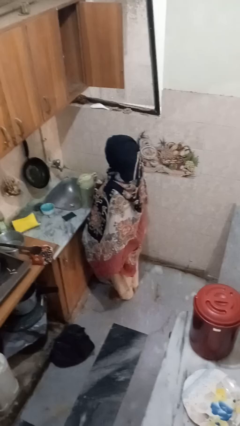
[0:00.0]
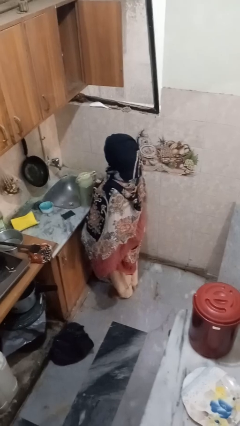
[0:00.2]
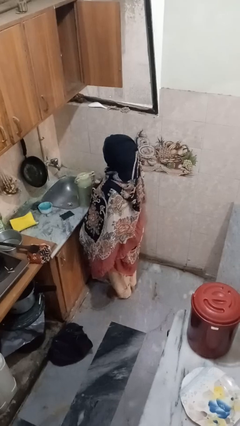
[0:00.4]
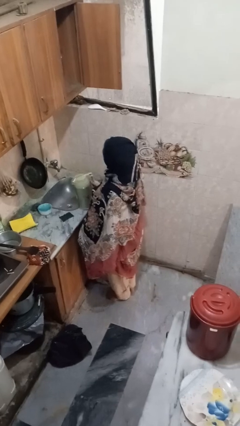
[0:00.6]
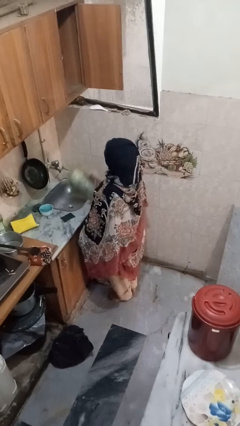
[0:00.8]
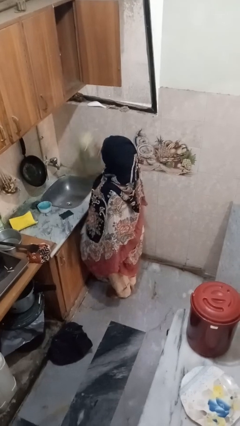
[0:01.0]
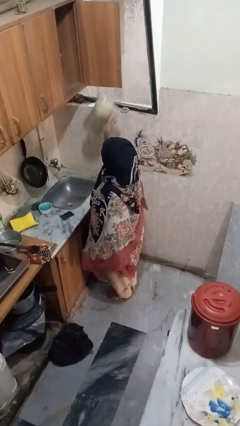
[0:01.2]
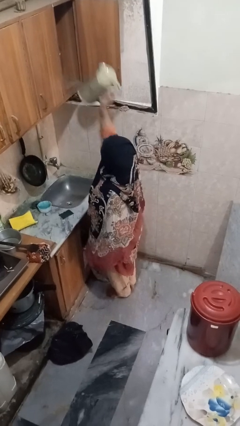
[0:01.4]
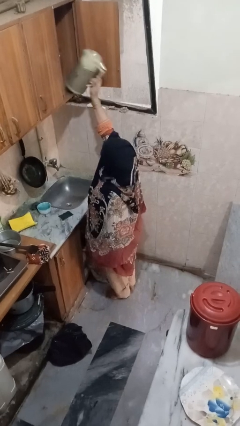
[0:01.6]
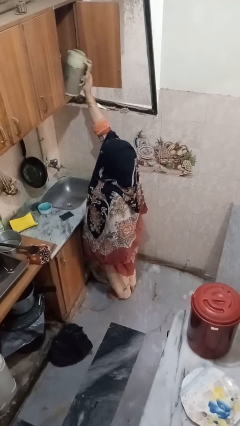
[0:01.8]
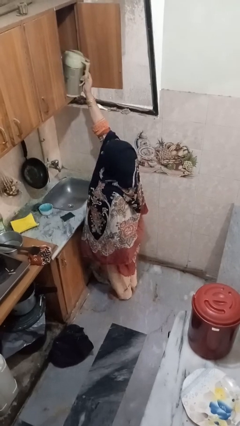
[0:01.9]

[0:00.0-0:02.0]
person takes object from cabinet

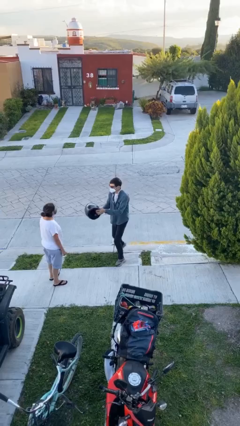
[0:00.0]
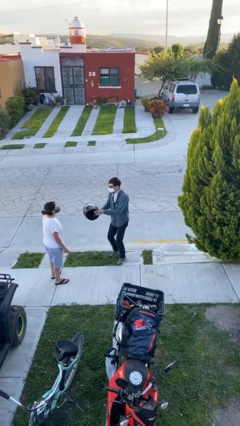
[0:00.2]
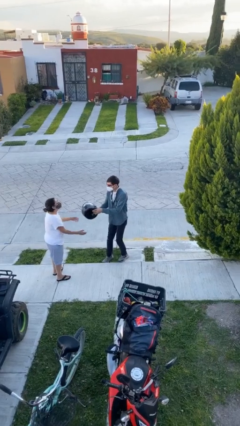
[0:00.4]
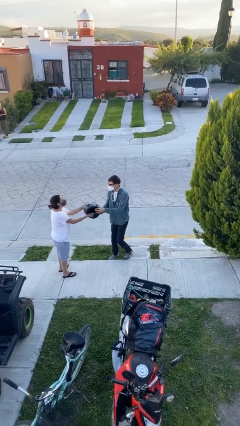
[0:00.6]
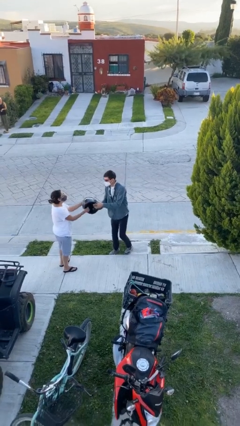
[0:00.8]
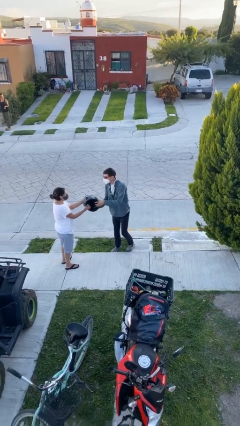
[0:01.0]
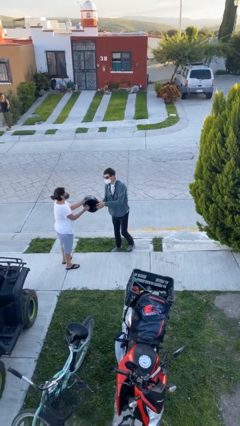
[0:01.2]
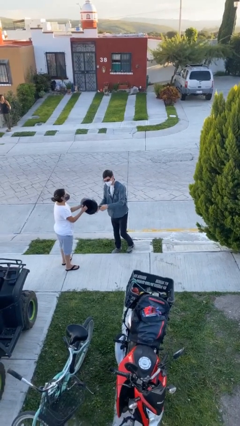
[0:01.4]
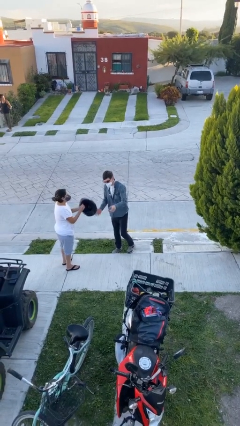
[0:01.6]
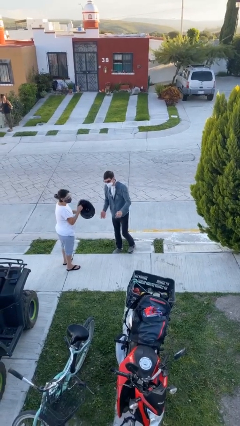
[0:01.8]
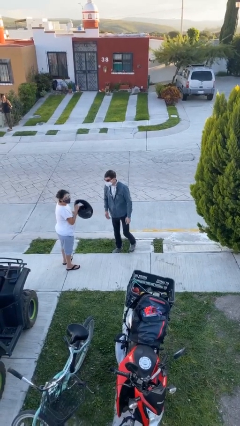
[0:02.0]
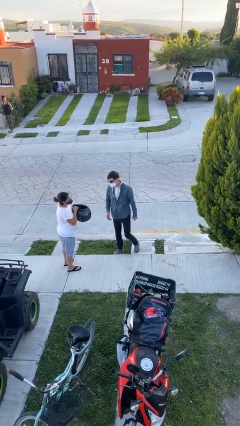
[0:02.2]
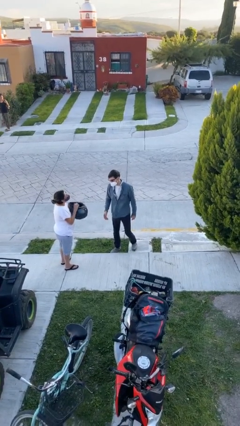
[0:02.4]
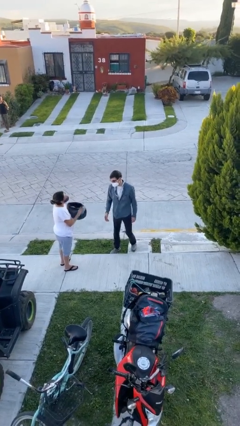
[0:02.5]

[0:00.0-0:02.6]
person transfers object to person

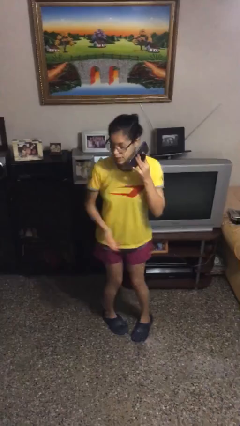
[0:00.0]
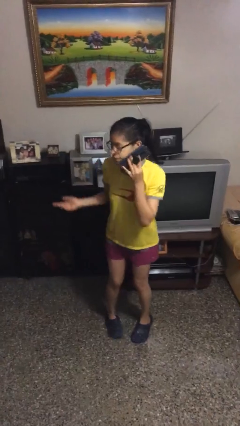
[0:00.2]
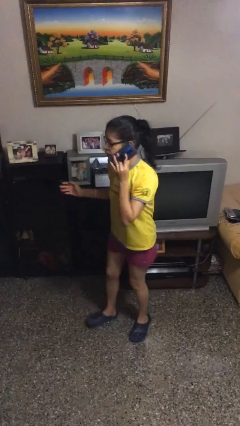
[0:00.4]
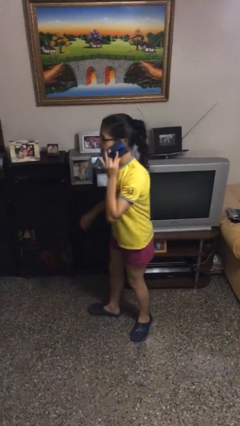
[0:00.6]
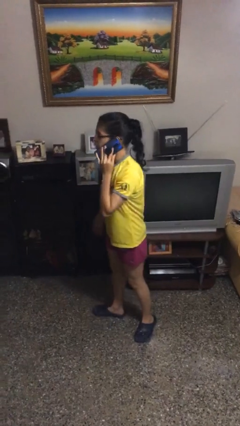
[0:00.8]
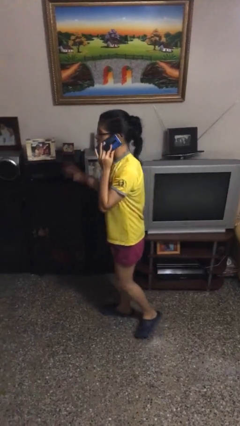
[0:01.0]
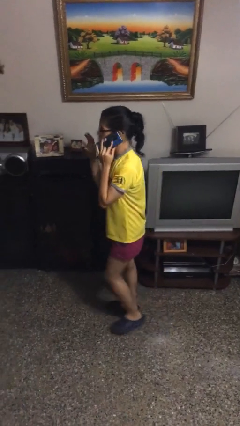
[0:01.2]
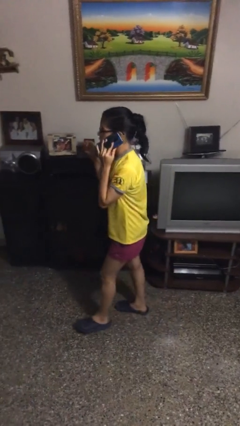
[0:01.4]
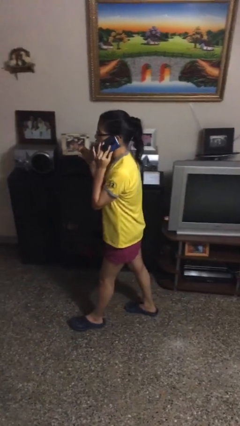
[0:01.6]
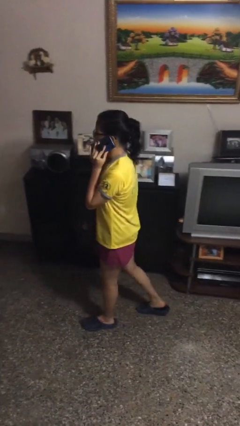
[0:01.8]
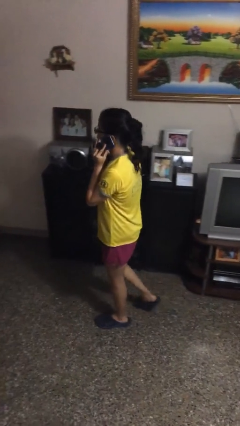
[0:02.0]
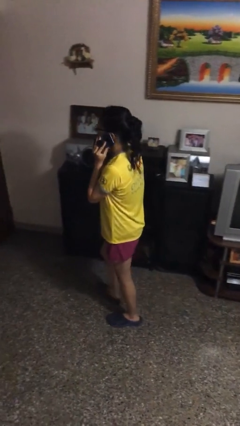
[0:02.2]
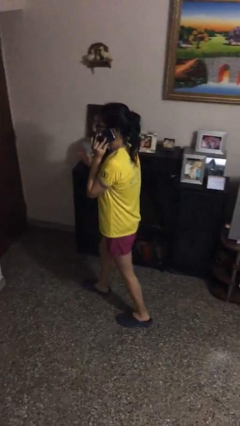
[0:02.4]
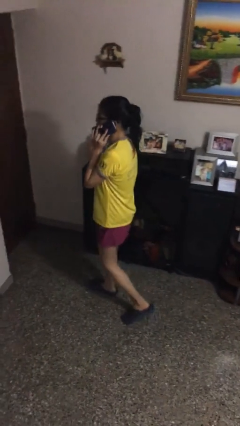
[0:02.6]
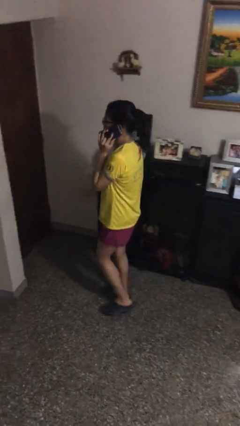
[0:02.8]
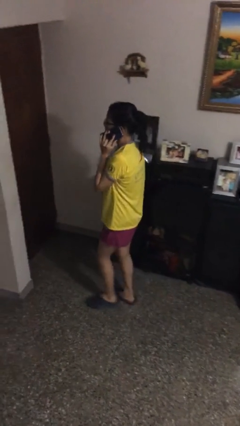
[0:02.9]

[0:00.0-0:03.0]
person talks on phone

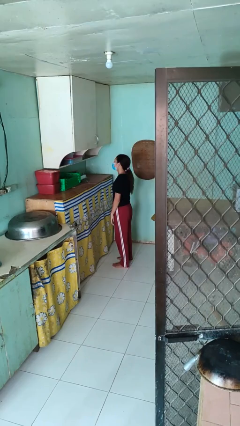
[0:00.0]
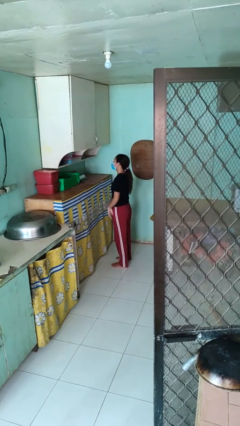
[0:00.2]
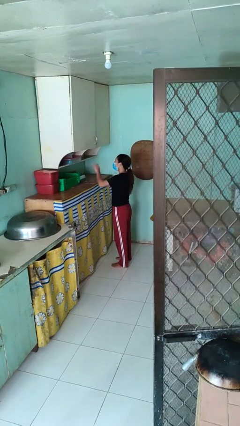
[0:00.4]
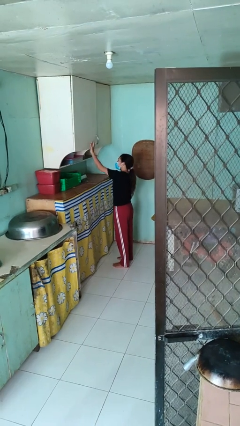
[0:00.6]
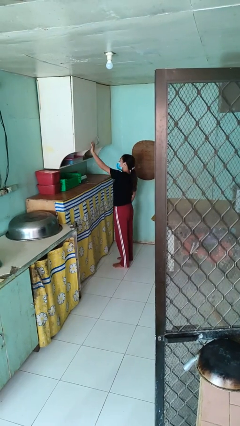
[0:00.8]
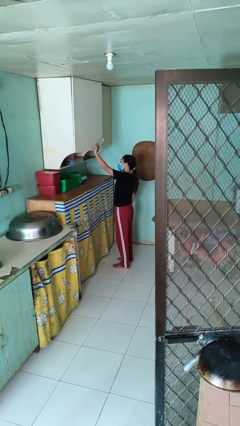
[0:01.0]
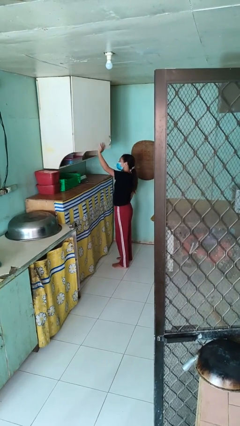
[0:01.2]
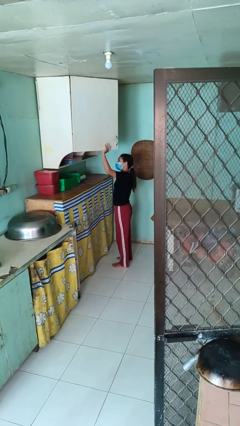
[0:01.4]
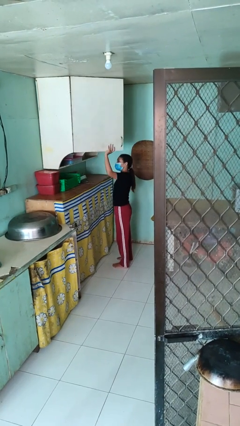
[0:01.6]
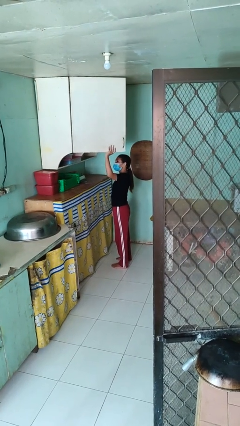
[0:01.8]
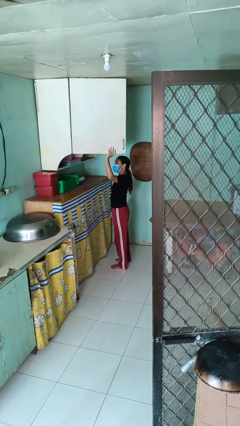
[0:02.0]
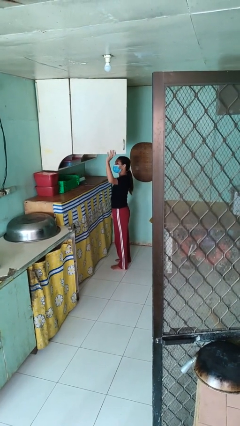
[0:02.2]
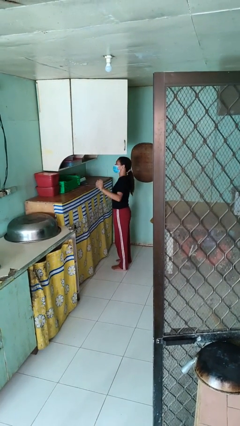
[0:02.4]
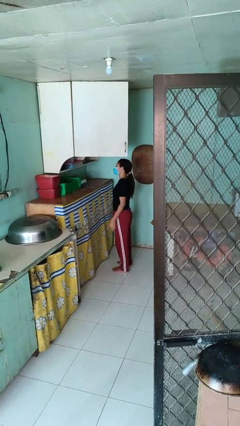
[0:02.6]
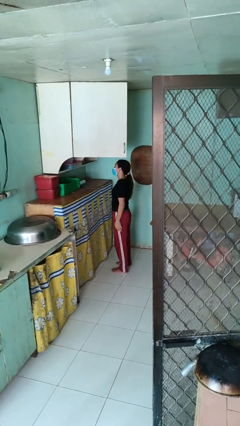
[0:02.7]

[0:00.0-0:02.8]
person opens cabinet

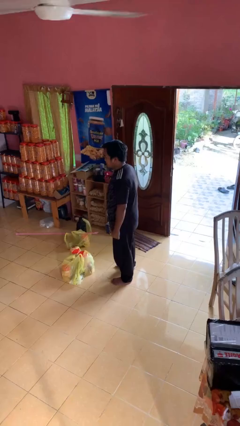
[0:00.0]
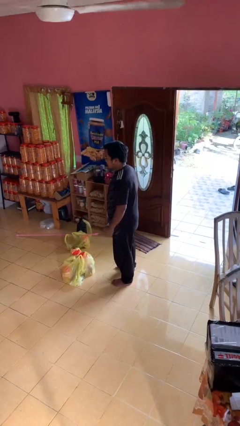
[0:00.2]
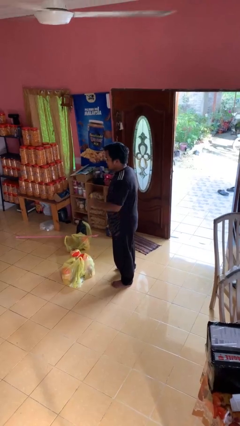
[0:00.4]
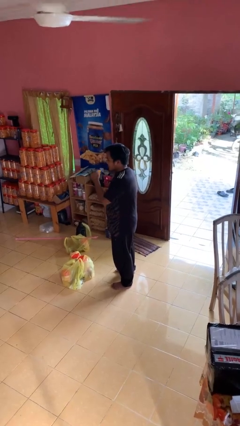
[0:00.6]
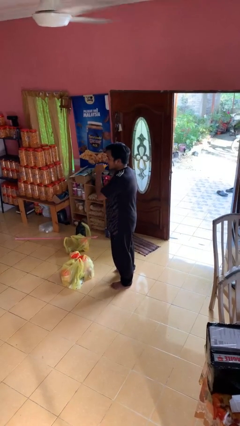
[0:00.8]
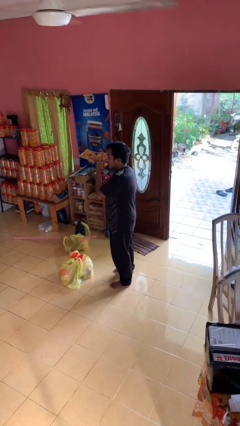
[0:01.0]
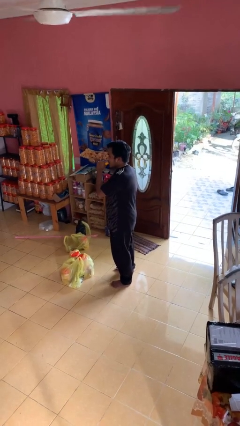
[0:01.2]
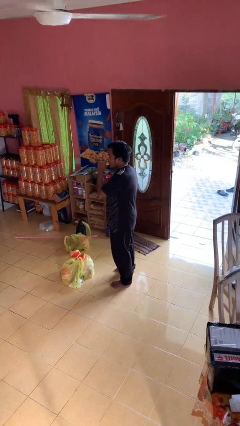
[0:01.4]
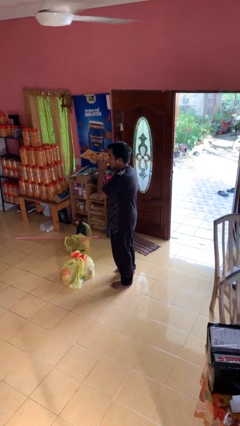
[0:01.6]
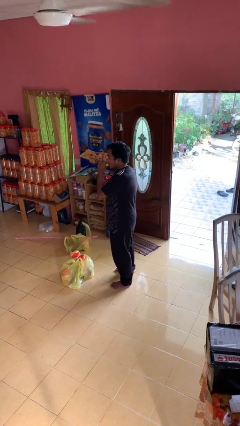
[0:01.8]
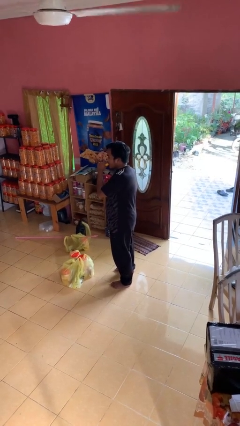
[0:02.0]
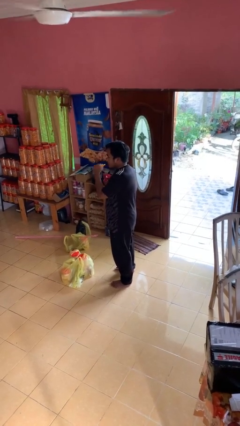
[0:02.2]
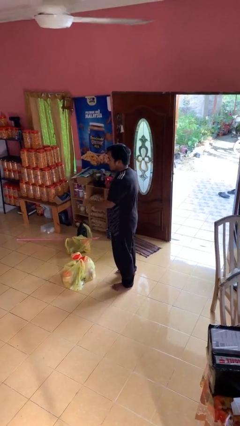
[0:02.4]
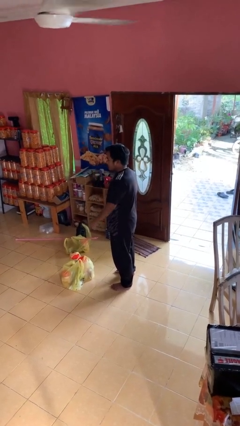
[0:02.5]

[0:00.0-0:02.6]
person eats banana

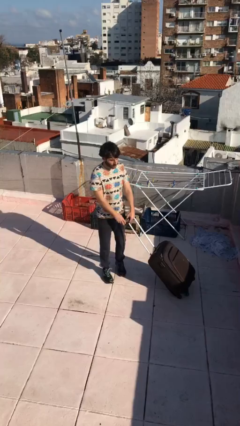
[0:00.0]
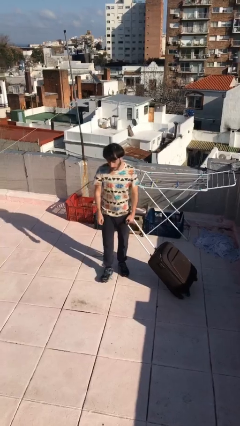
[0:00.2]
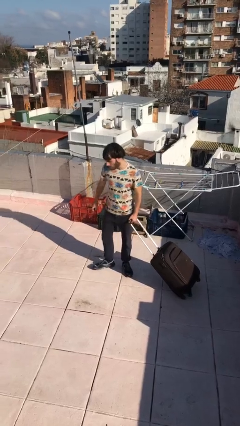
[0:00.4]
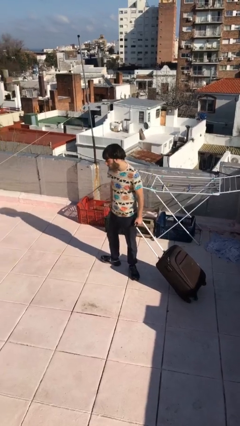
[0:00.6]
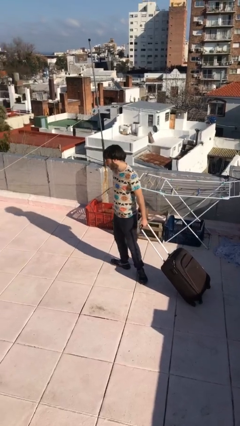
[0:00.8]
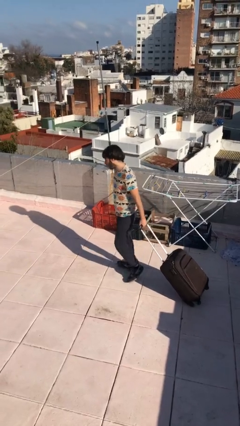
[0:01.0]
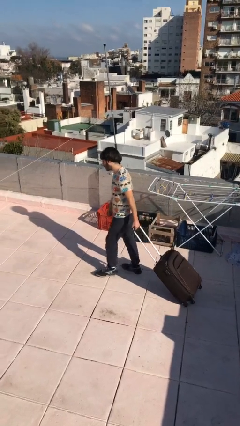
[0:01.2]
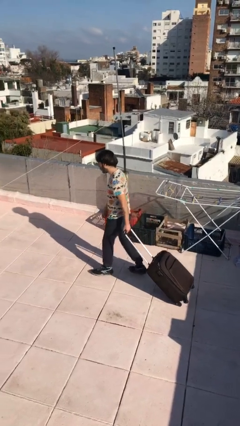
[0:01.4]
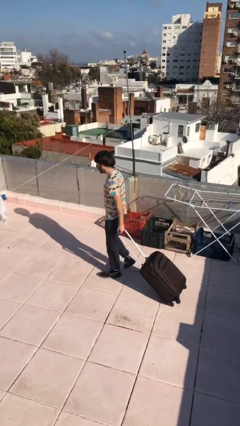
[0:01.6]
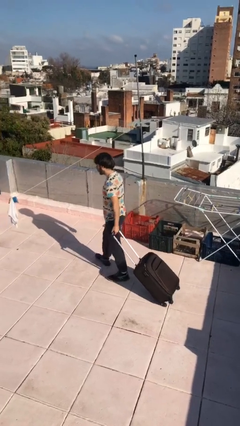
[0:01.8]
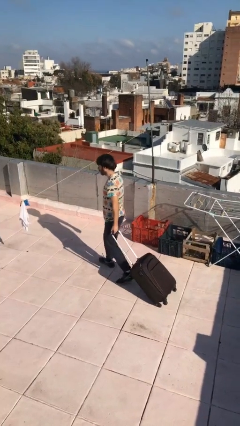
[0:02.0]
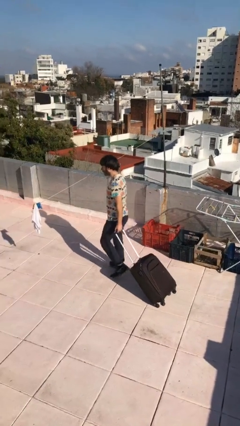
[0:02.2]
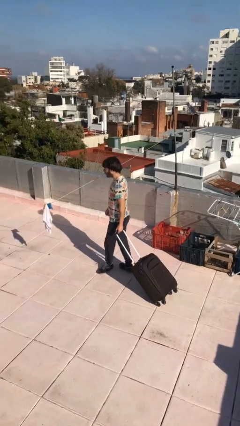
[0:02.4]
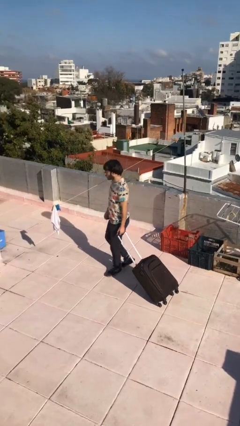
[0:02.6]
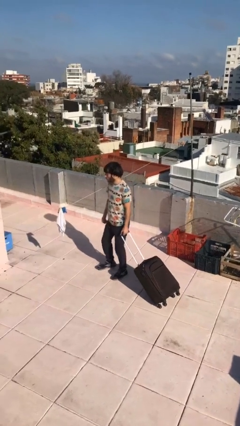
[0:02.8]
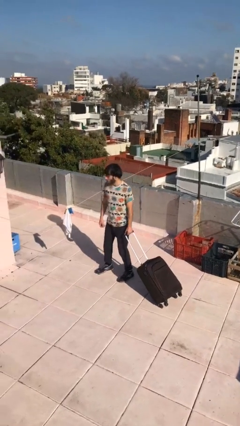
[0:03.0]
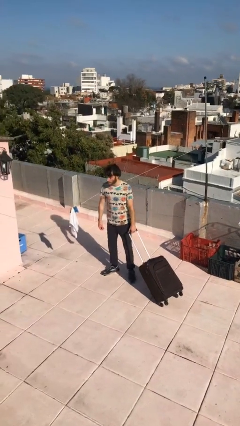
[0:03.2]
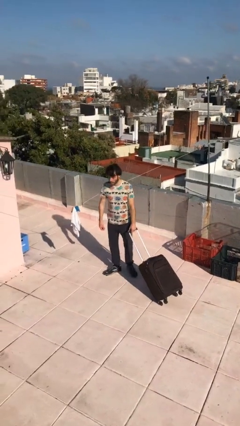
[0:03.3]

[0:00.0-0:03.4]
person pulls wheeled cart

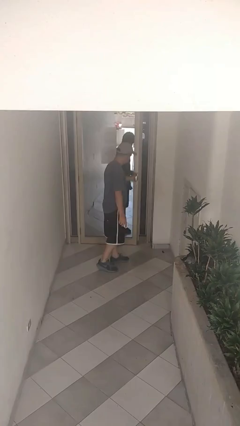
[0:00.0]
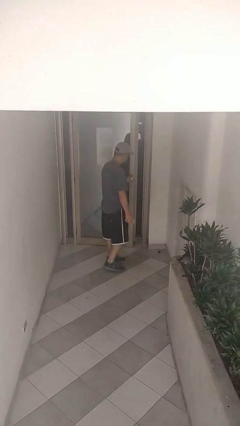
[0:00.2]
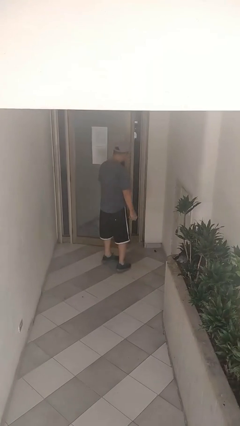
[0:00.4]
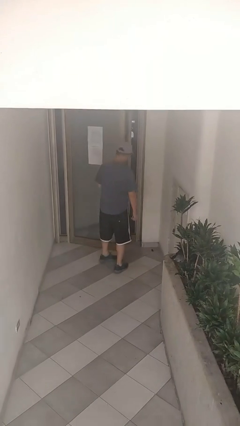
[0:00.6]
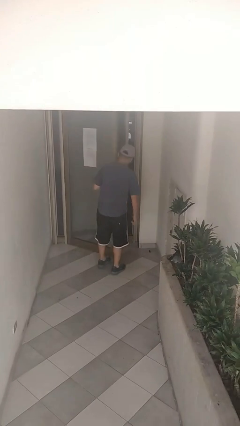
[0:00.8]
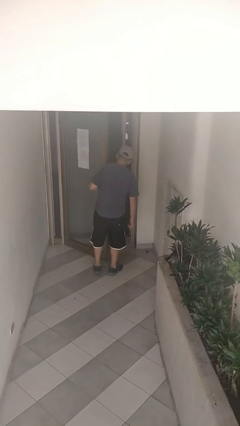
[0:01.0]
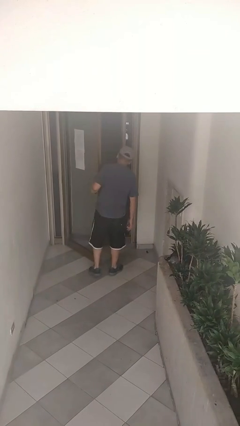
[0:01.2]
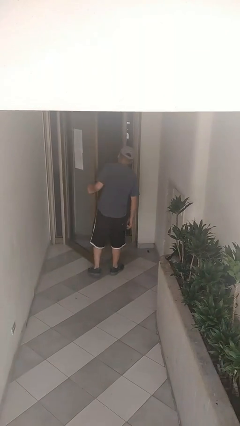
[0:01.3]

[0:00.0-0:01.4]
person opens facility door
